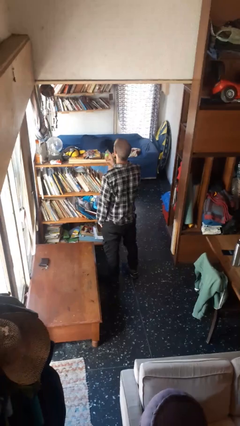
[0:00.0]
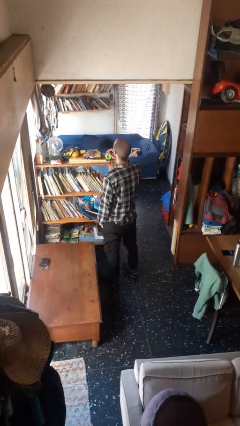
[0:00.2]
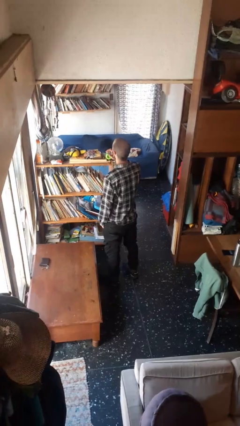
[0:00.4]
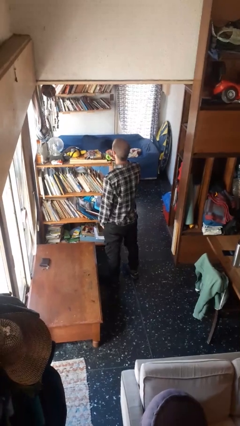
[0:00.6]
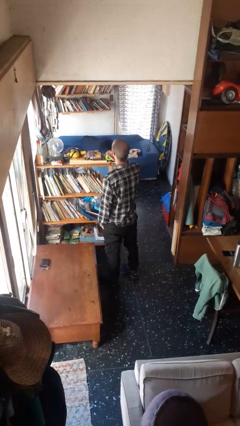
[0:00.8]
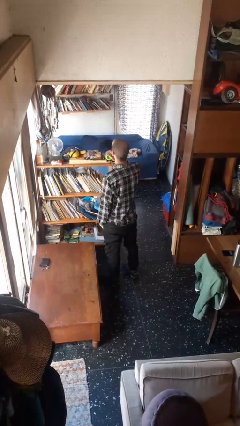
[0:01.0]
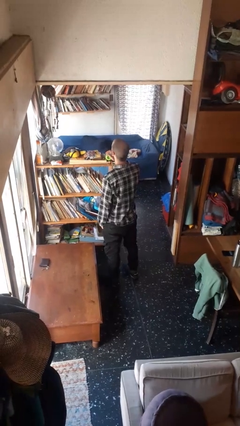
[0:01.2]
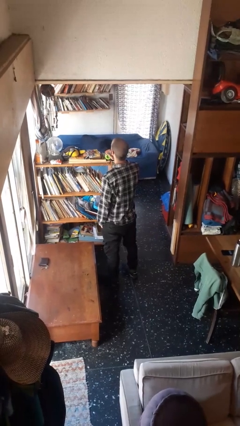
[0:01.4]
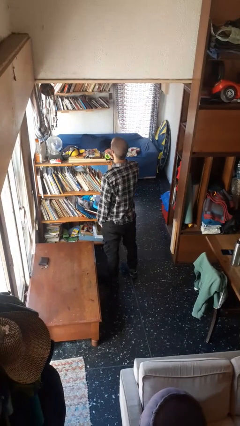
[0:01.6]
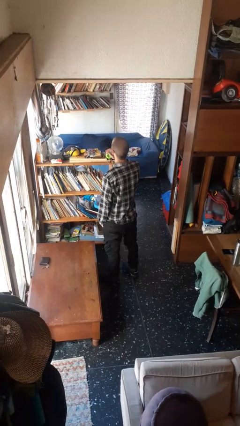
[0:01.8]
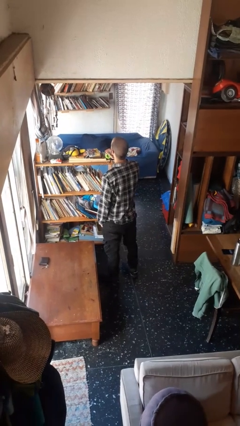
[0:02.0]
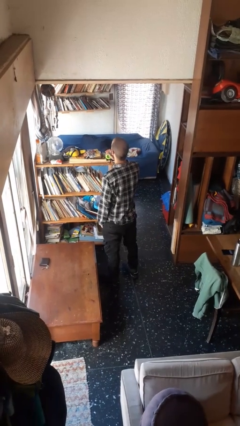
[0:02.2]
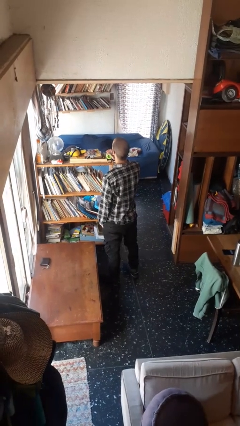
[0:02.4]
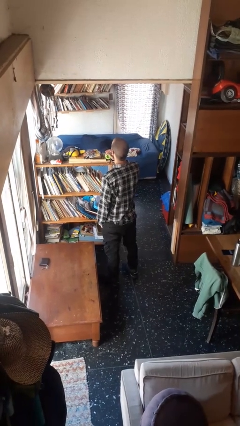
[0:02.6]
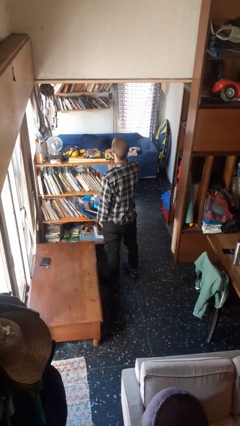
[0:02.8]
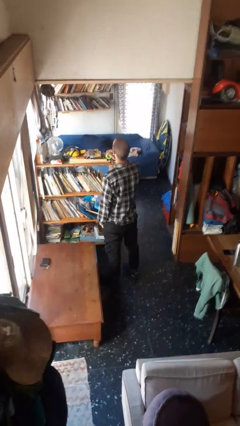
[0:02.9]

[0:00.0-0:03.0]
person gestures be quiet

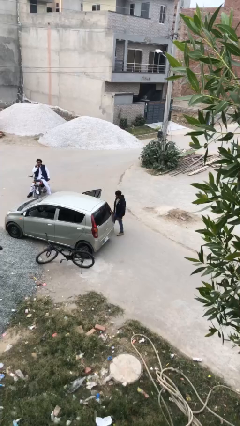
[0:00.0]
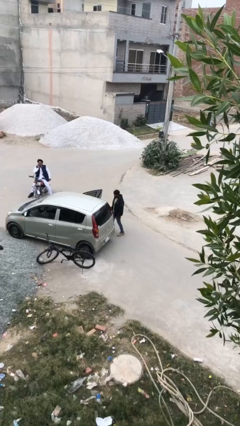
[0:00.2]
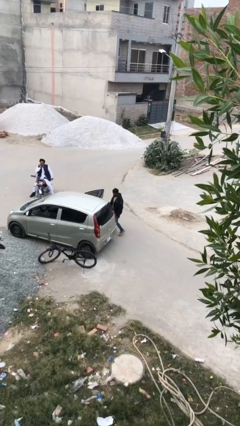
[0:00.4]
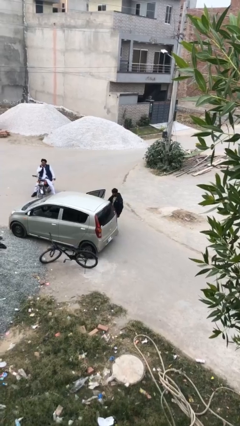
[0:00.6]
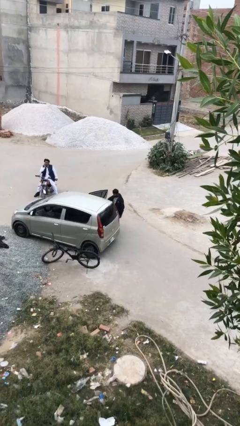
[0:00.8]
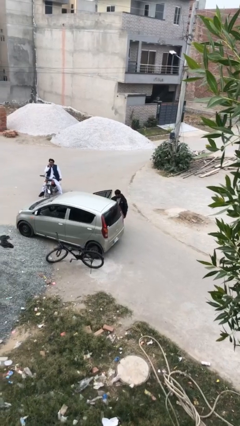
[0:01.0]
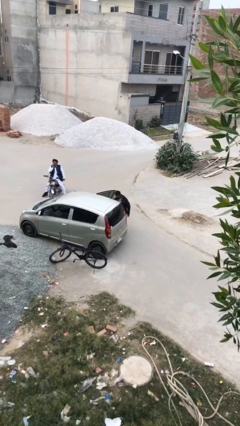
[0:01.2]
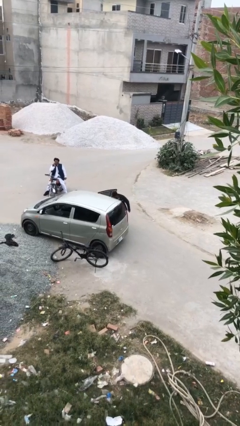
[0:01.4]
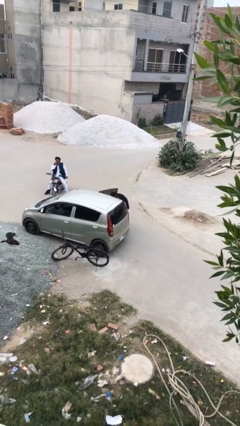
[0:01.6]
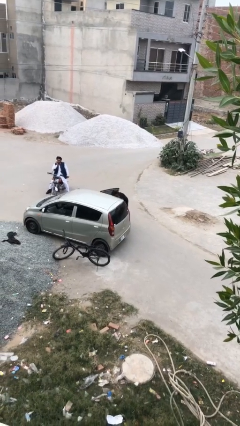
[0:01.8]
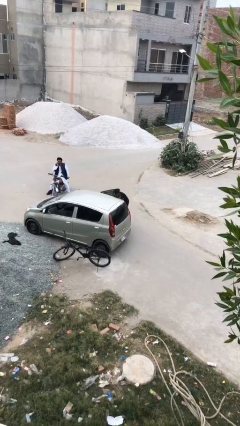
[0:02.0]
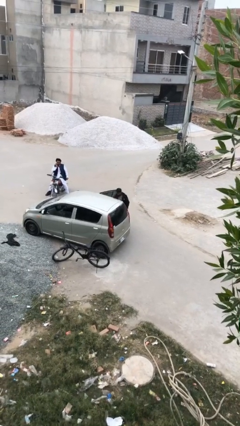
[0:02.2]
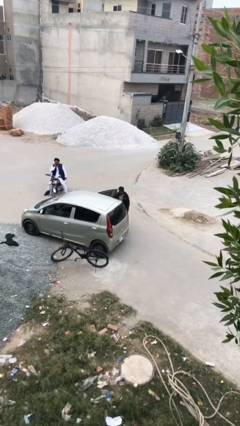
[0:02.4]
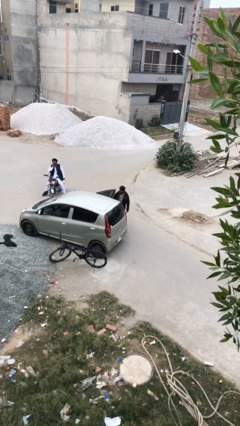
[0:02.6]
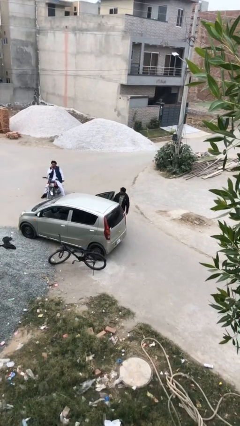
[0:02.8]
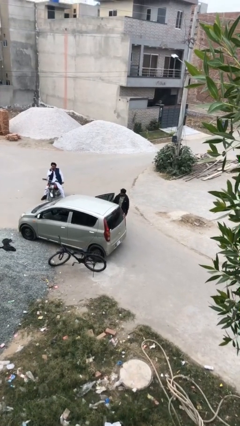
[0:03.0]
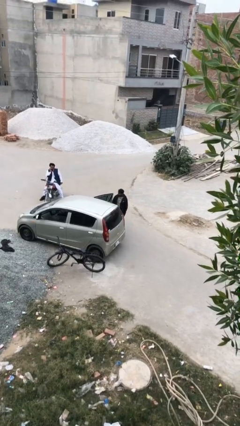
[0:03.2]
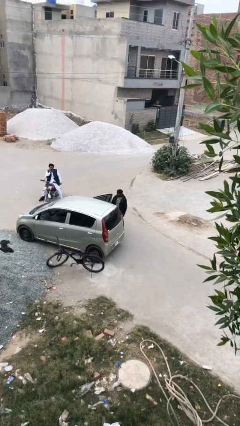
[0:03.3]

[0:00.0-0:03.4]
person loads car

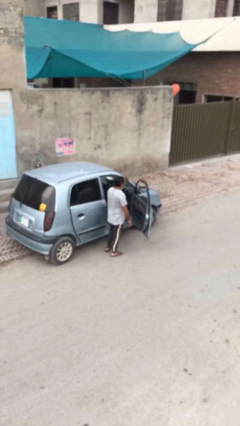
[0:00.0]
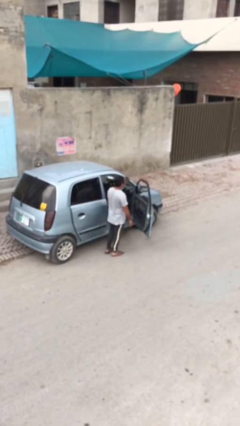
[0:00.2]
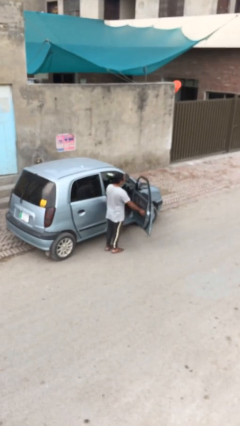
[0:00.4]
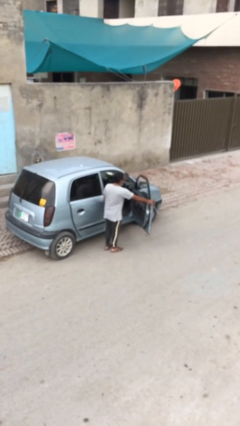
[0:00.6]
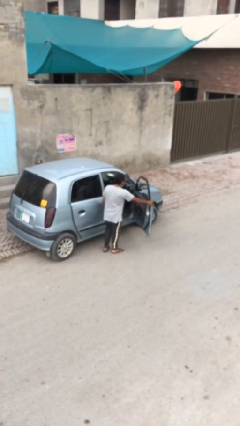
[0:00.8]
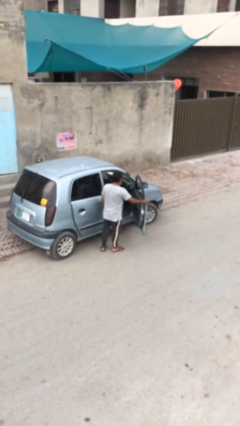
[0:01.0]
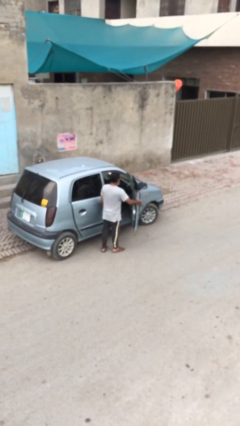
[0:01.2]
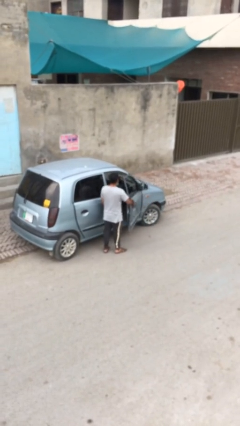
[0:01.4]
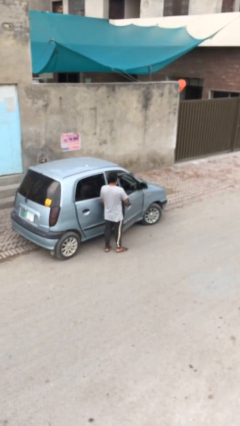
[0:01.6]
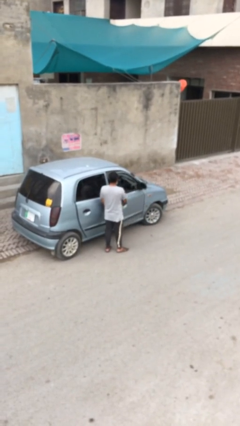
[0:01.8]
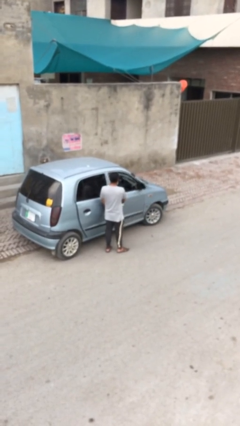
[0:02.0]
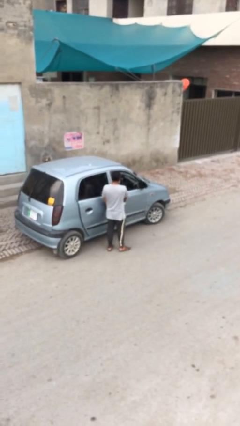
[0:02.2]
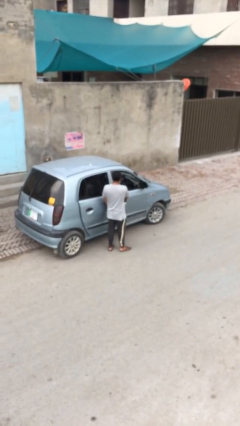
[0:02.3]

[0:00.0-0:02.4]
person closes car door

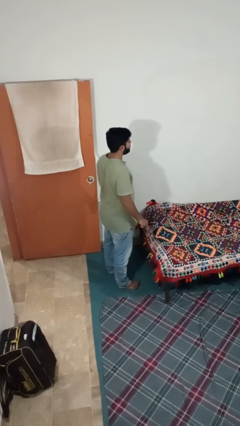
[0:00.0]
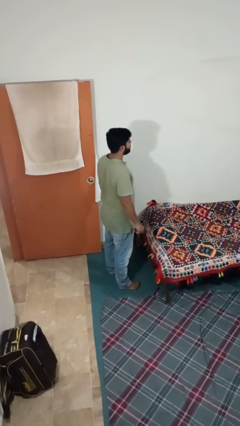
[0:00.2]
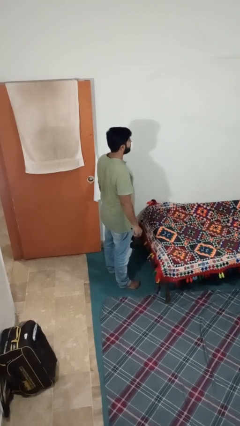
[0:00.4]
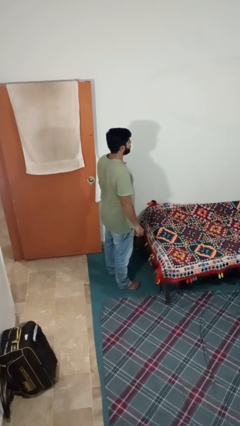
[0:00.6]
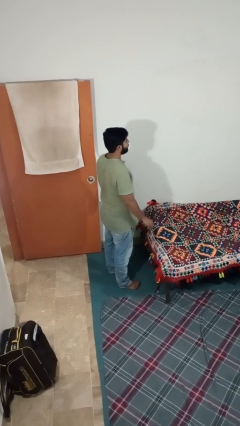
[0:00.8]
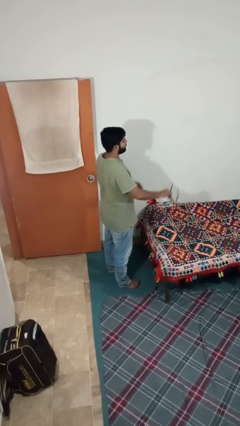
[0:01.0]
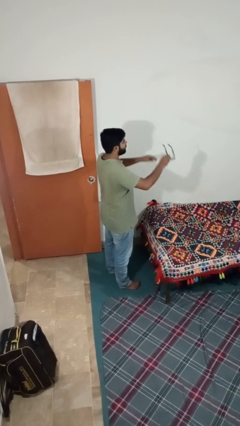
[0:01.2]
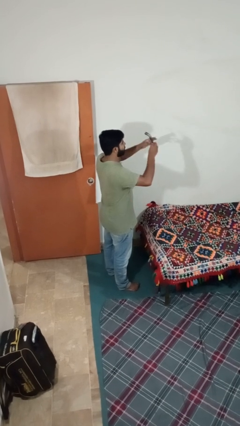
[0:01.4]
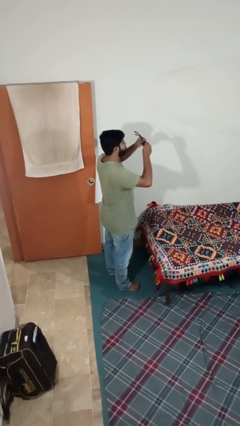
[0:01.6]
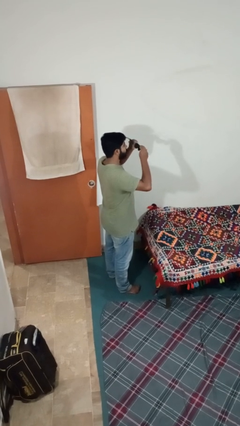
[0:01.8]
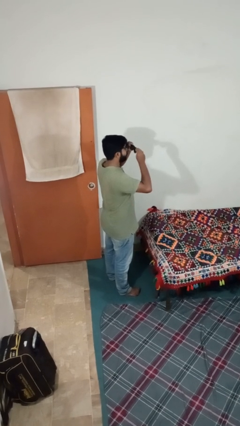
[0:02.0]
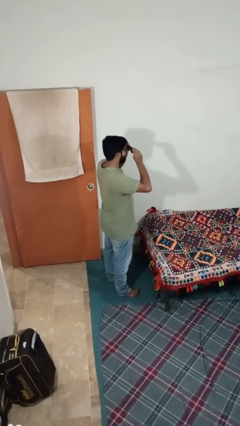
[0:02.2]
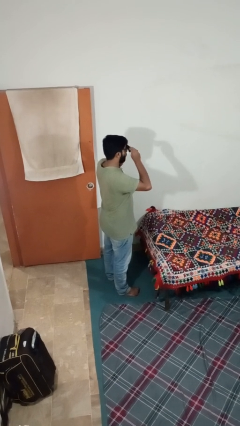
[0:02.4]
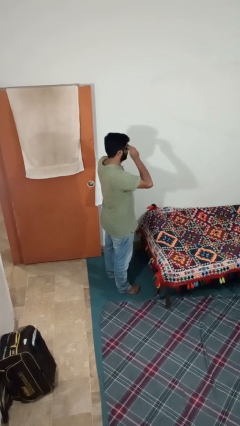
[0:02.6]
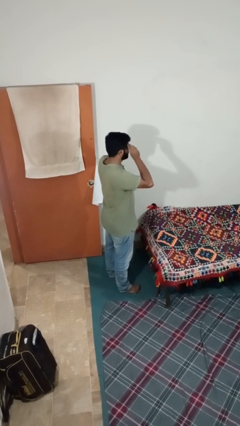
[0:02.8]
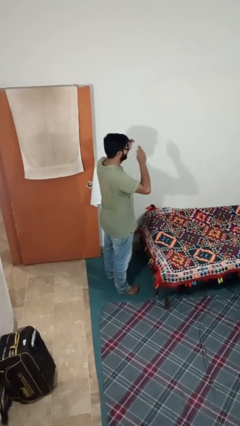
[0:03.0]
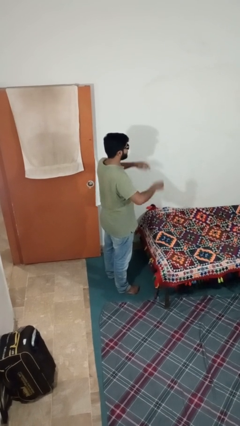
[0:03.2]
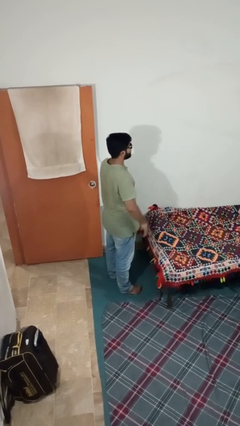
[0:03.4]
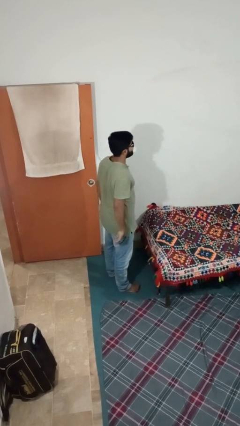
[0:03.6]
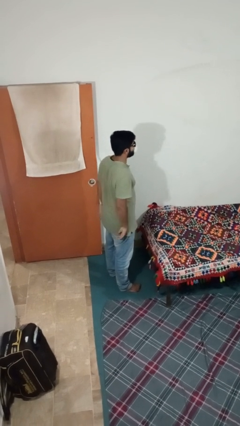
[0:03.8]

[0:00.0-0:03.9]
person puts on sunglasses

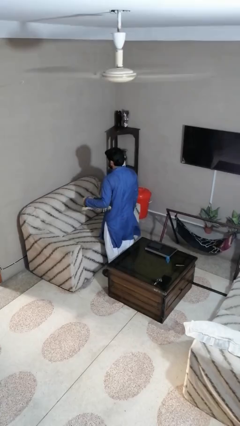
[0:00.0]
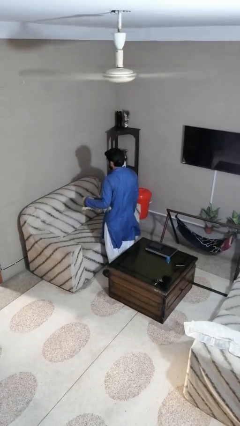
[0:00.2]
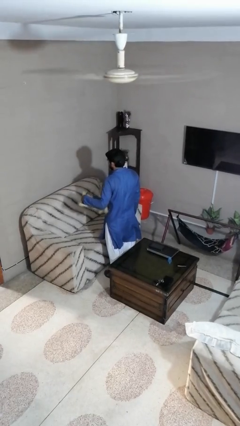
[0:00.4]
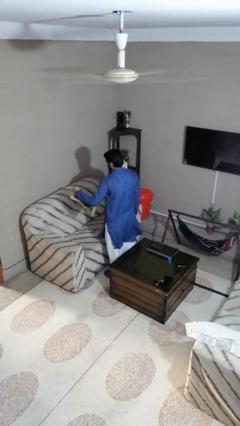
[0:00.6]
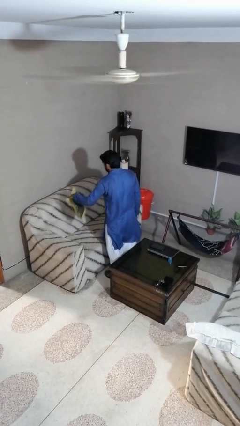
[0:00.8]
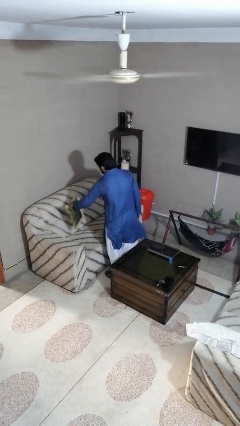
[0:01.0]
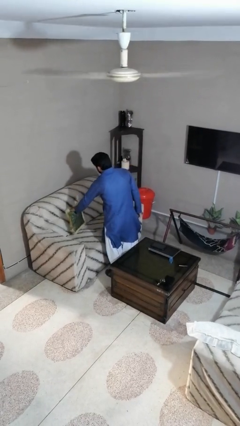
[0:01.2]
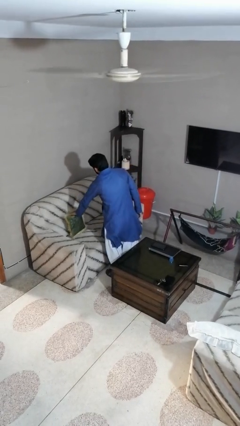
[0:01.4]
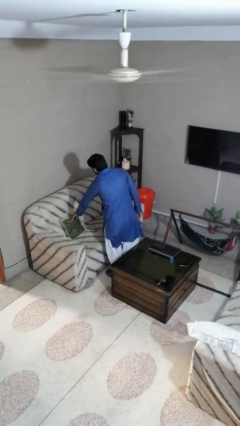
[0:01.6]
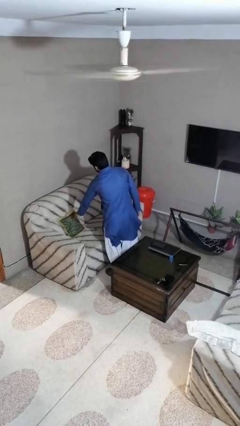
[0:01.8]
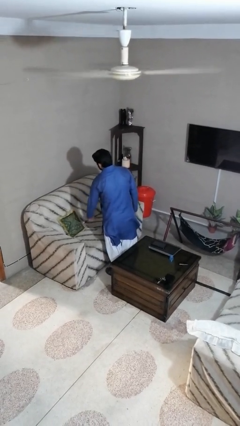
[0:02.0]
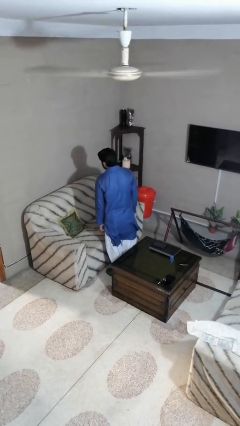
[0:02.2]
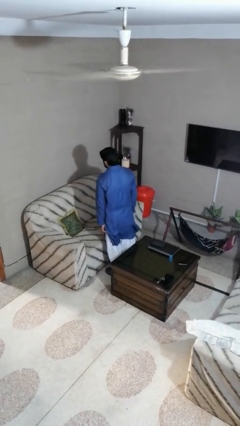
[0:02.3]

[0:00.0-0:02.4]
person puts down object on couch

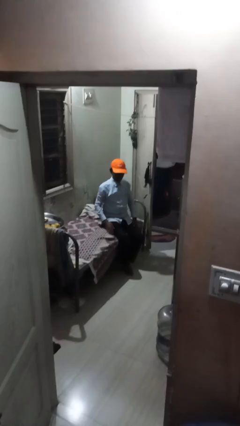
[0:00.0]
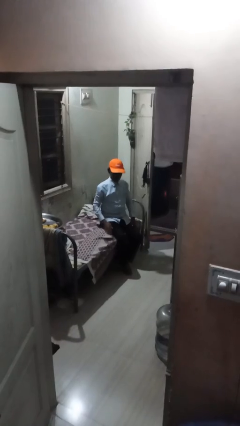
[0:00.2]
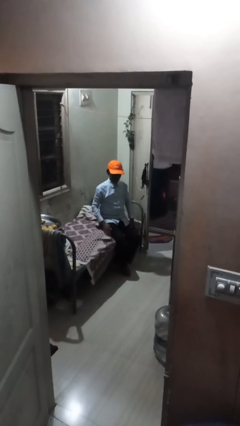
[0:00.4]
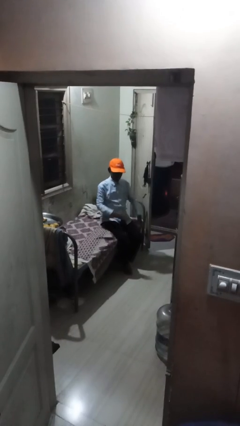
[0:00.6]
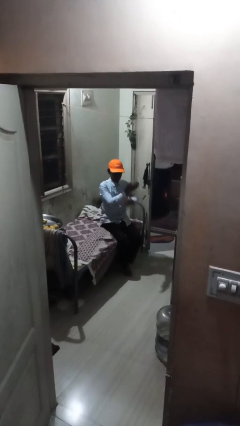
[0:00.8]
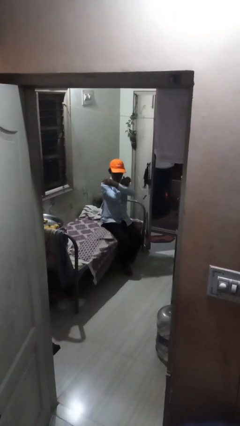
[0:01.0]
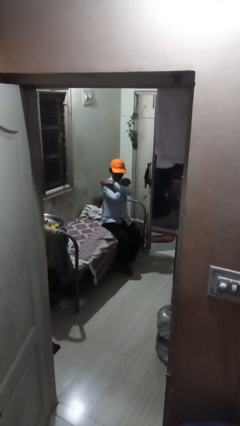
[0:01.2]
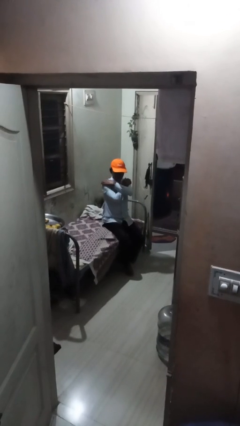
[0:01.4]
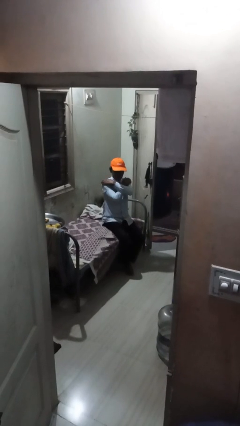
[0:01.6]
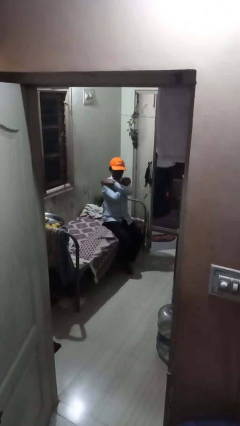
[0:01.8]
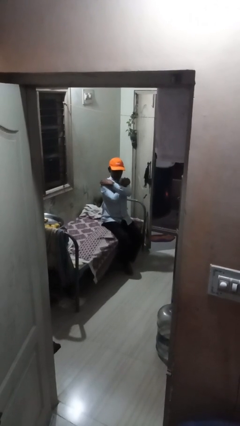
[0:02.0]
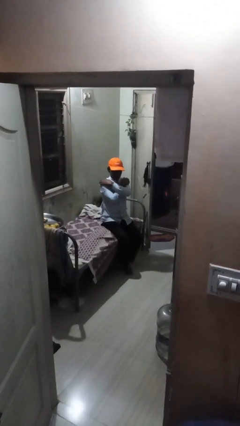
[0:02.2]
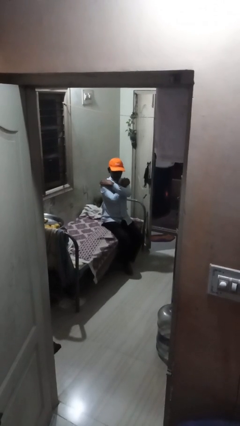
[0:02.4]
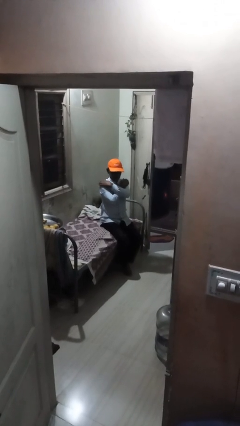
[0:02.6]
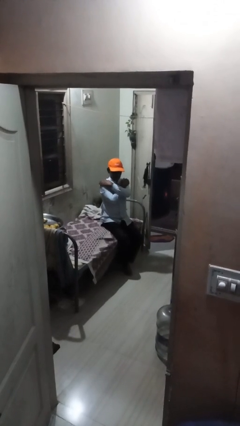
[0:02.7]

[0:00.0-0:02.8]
person gestures arms x
